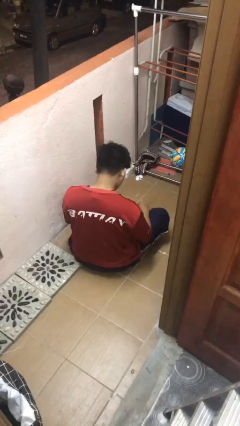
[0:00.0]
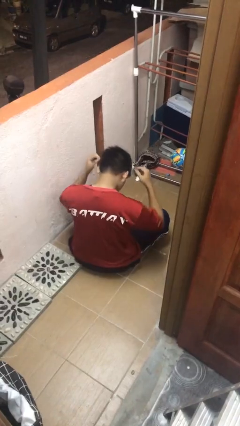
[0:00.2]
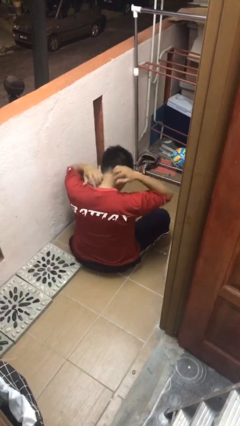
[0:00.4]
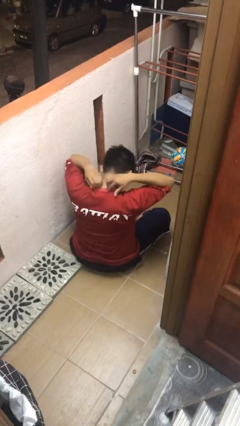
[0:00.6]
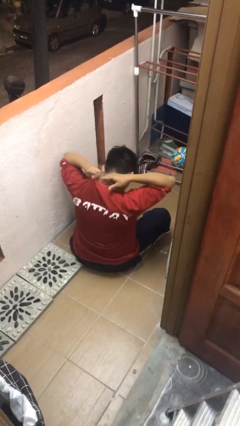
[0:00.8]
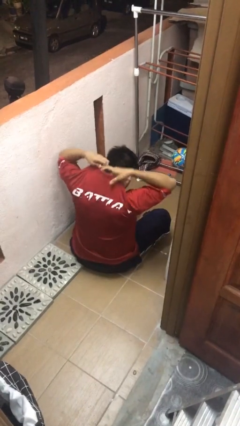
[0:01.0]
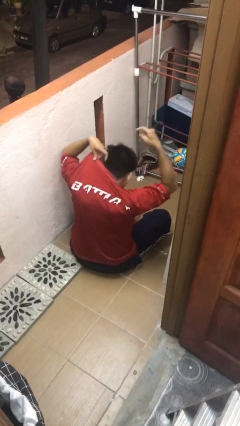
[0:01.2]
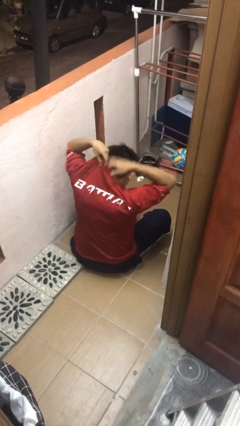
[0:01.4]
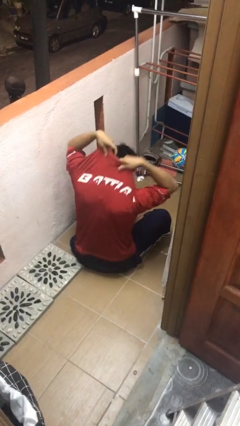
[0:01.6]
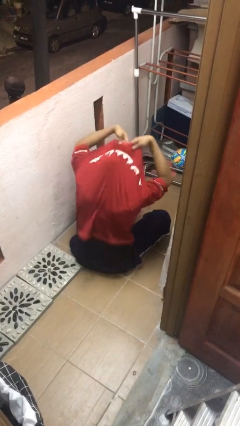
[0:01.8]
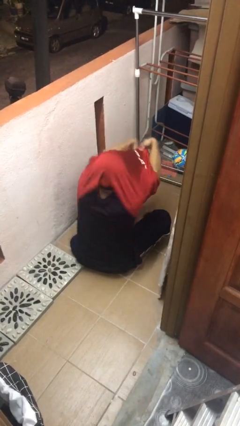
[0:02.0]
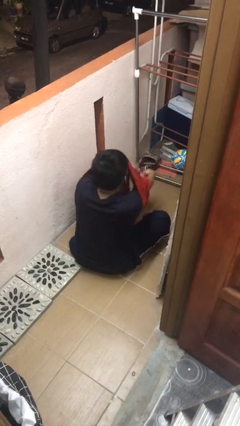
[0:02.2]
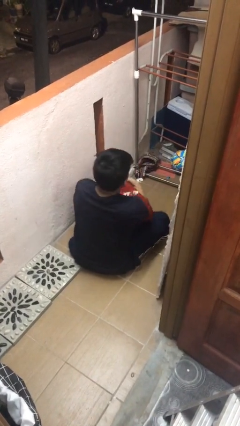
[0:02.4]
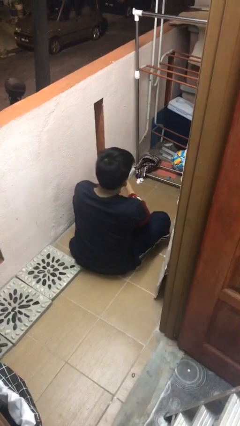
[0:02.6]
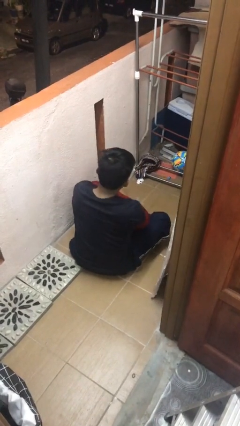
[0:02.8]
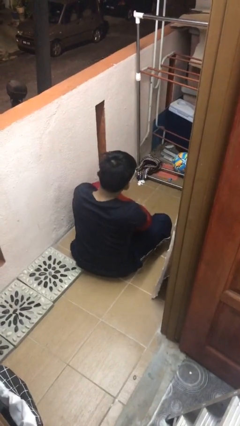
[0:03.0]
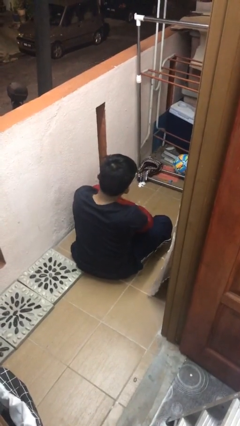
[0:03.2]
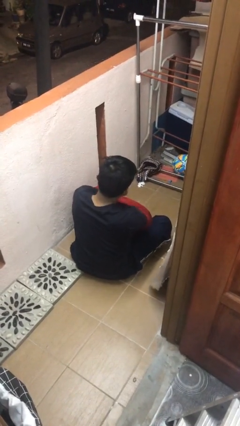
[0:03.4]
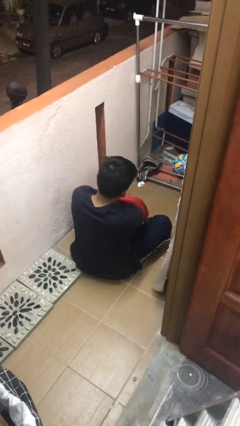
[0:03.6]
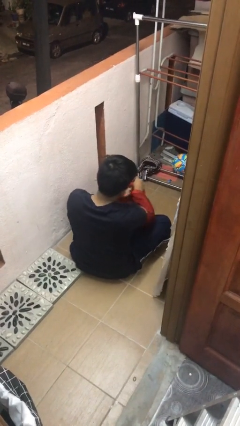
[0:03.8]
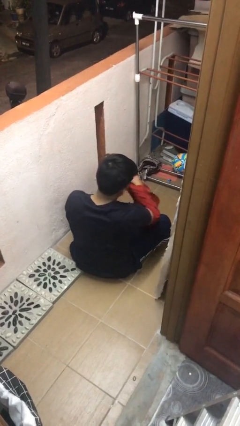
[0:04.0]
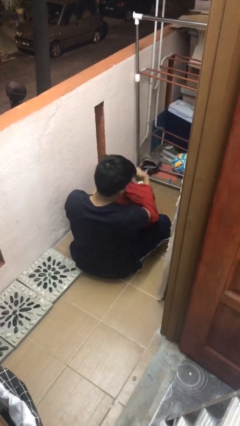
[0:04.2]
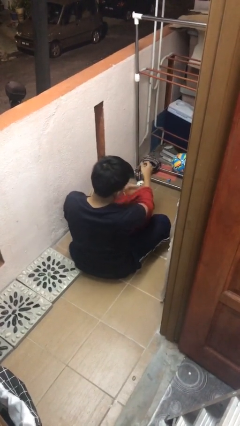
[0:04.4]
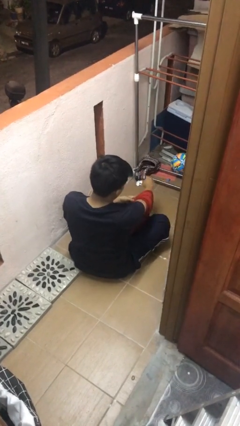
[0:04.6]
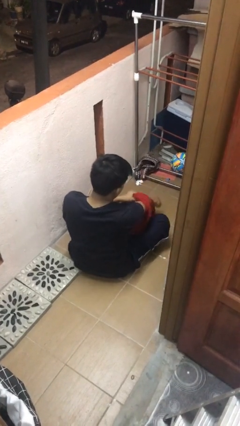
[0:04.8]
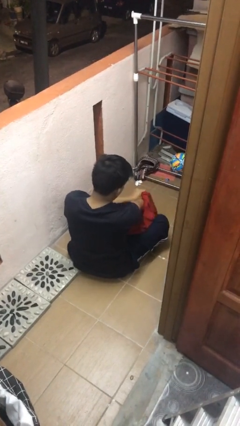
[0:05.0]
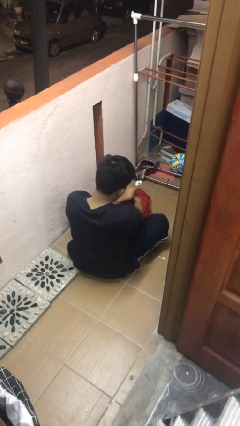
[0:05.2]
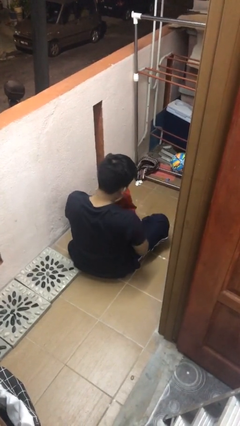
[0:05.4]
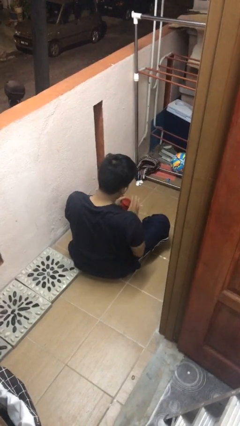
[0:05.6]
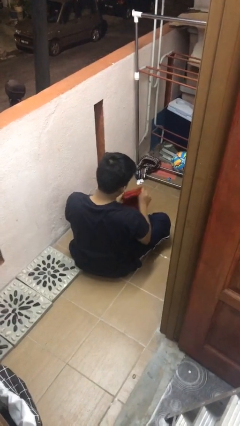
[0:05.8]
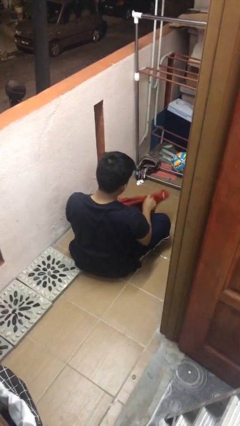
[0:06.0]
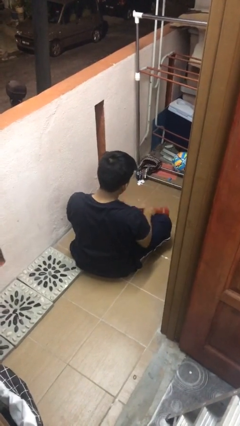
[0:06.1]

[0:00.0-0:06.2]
person takes off shirt

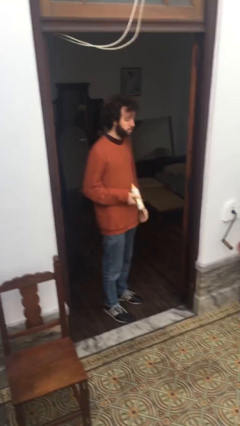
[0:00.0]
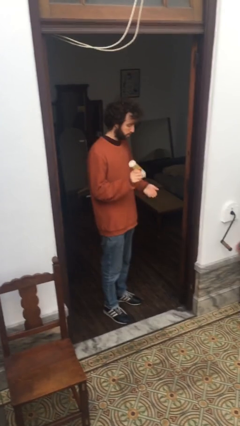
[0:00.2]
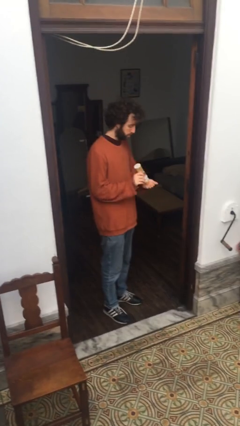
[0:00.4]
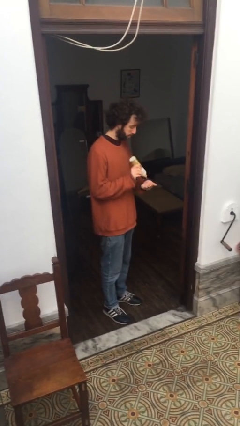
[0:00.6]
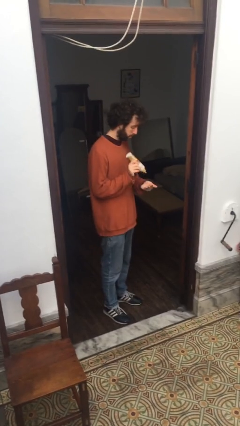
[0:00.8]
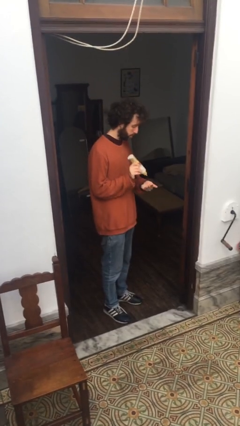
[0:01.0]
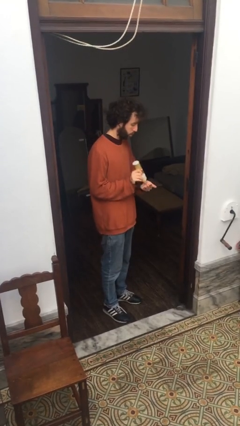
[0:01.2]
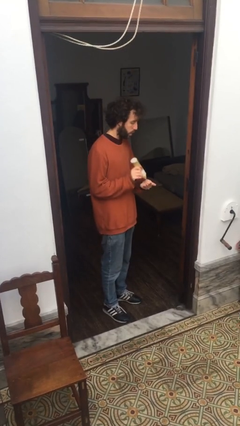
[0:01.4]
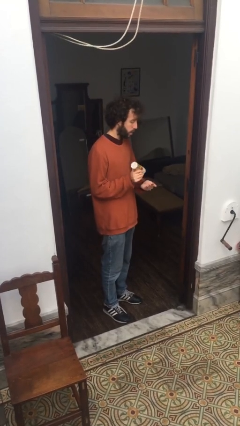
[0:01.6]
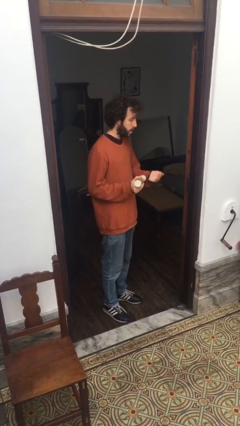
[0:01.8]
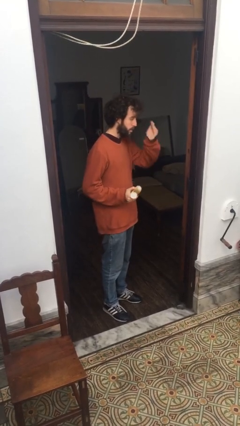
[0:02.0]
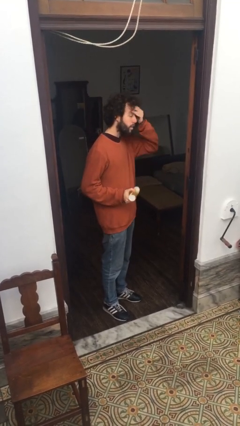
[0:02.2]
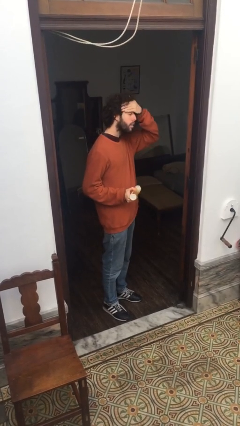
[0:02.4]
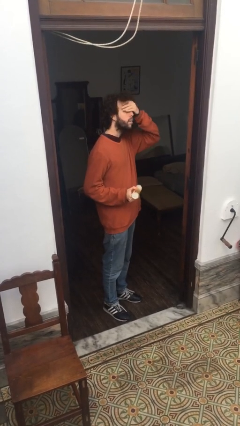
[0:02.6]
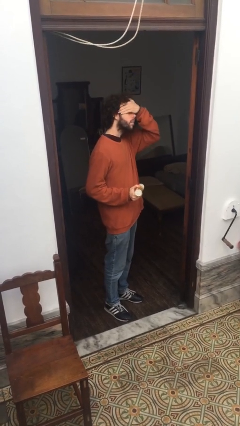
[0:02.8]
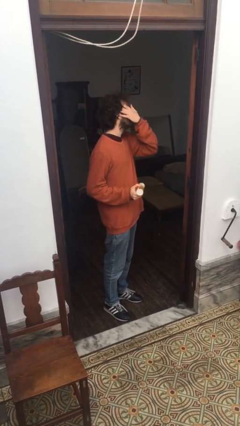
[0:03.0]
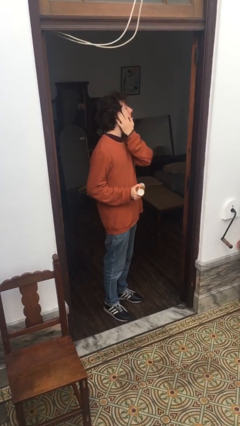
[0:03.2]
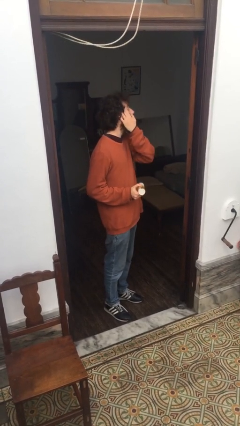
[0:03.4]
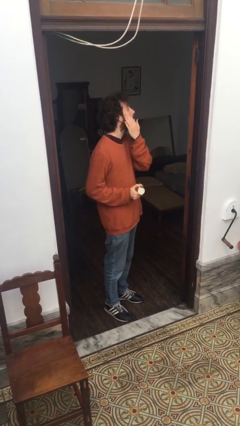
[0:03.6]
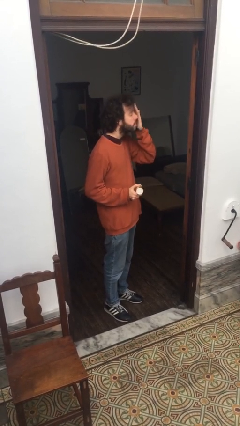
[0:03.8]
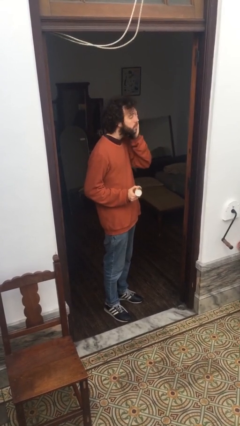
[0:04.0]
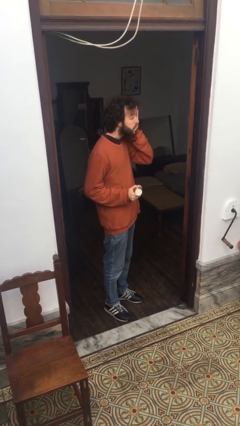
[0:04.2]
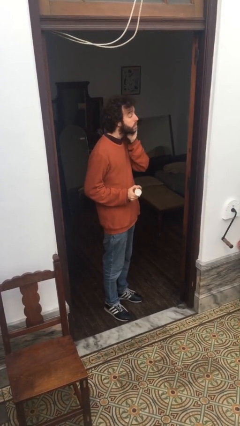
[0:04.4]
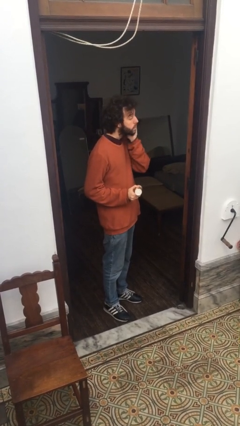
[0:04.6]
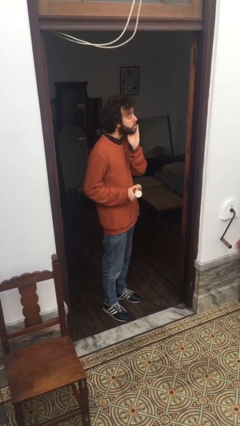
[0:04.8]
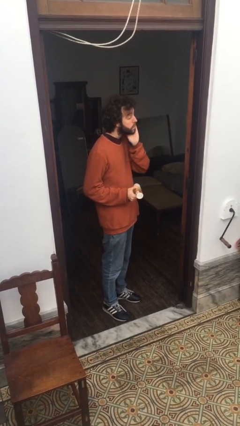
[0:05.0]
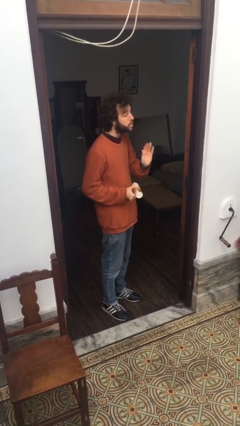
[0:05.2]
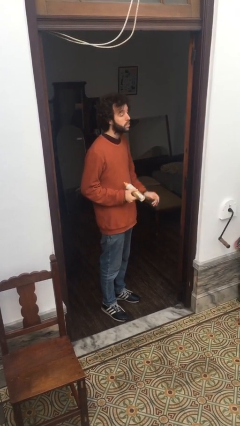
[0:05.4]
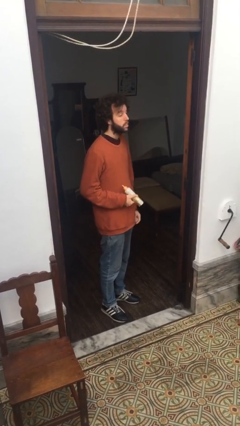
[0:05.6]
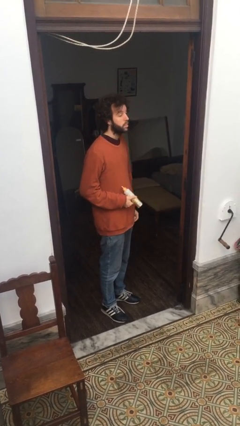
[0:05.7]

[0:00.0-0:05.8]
person applies facial moisturizer

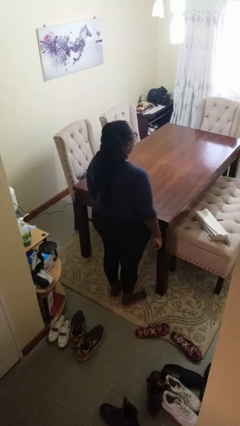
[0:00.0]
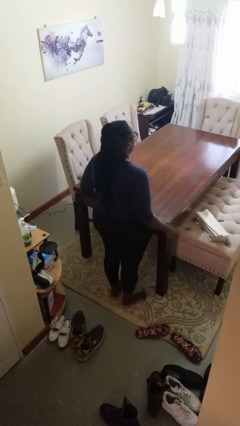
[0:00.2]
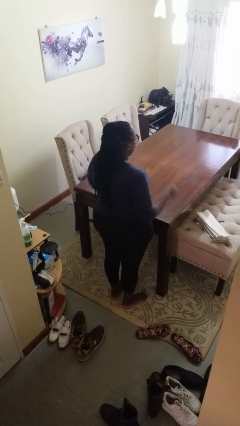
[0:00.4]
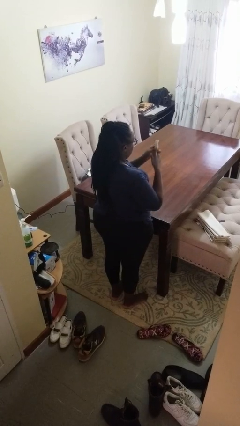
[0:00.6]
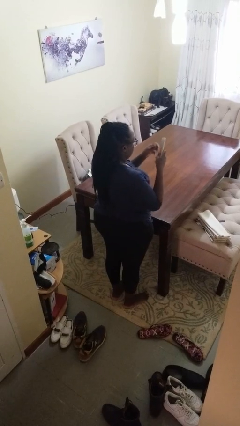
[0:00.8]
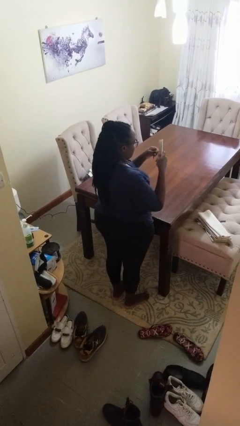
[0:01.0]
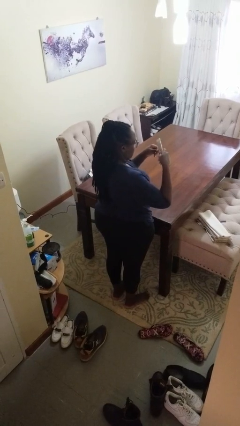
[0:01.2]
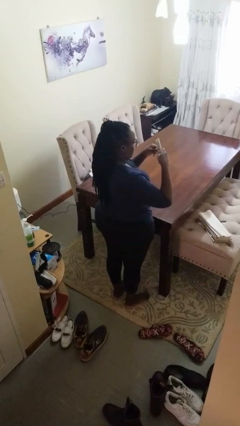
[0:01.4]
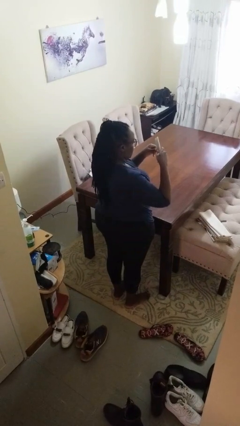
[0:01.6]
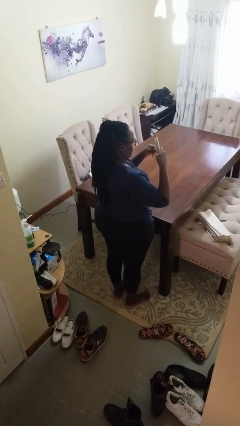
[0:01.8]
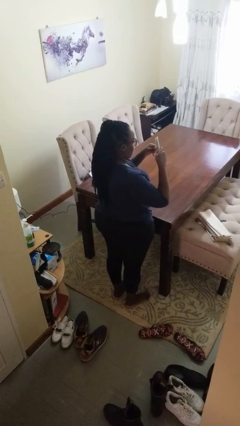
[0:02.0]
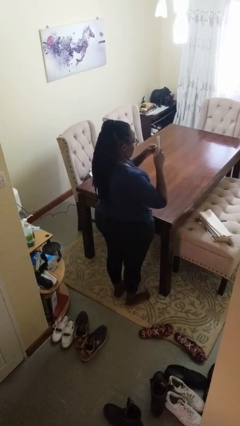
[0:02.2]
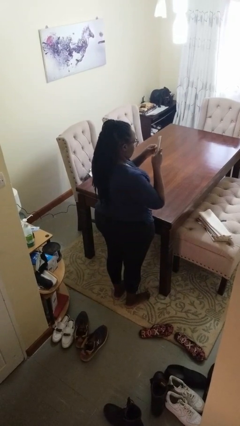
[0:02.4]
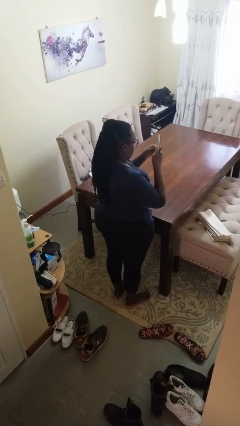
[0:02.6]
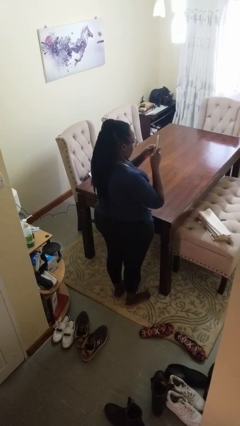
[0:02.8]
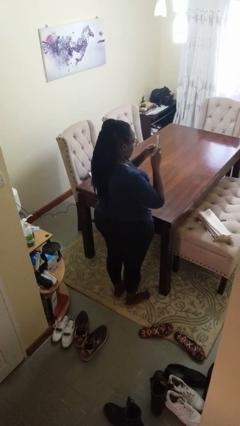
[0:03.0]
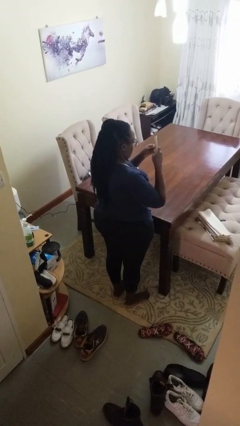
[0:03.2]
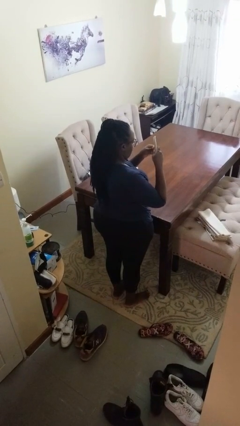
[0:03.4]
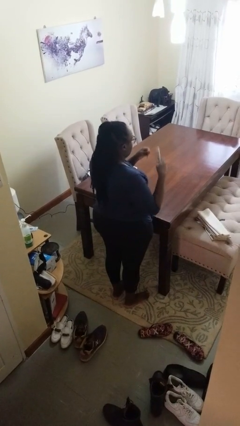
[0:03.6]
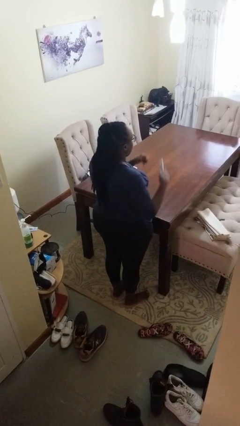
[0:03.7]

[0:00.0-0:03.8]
person files fingernails

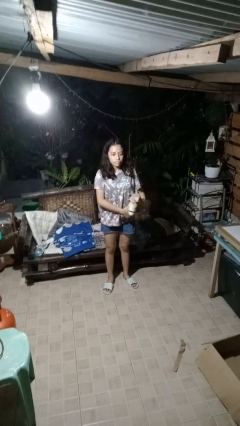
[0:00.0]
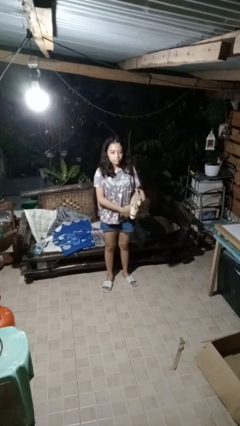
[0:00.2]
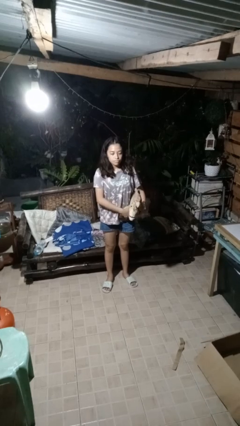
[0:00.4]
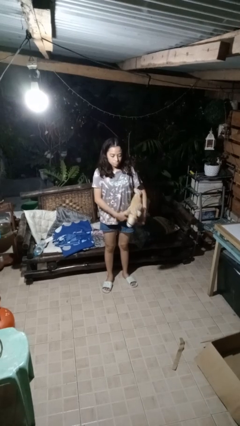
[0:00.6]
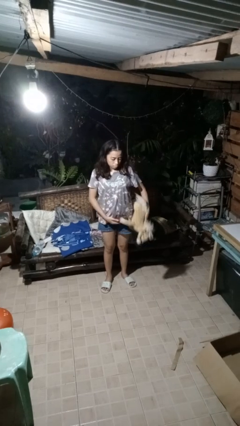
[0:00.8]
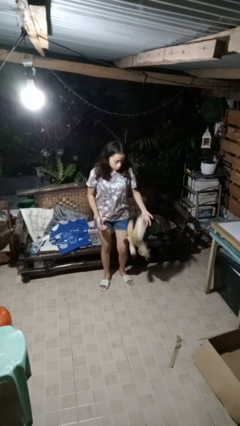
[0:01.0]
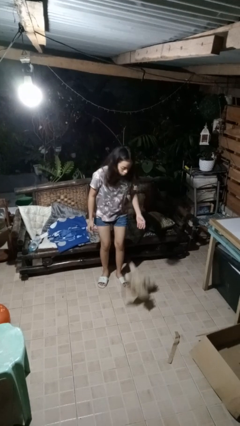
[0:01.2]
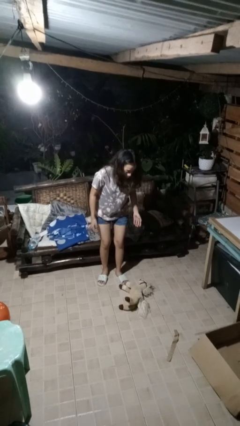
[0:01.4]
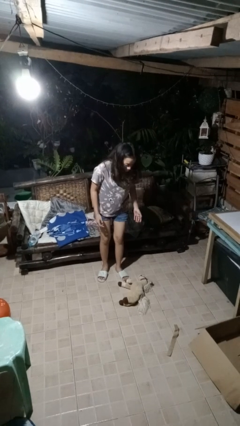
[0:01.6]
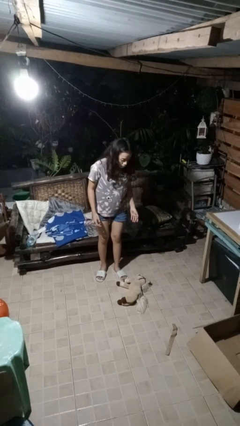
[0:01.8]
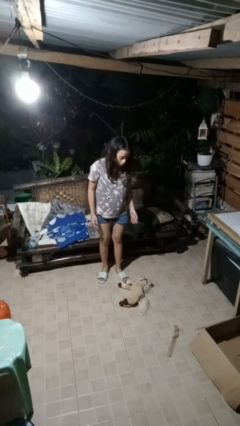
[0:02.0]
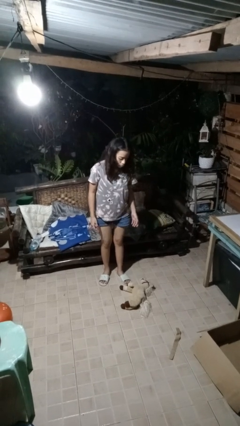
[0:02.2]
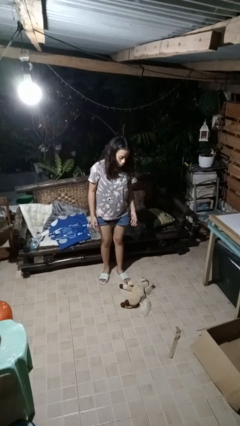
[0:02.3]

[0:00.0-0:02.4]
person drops object
